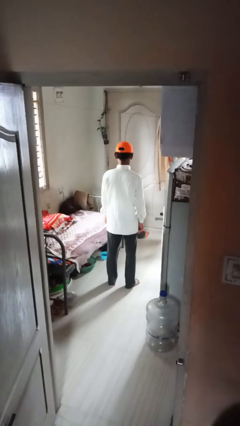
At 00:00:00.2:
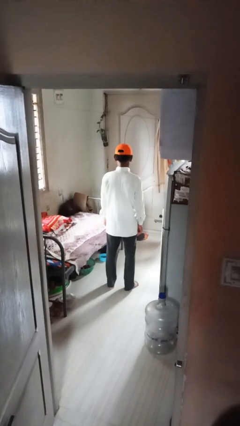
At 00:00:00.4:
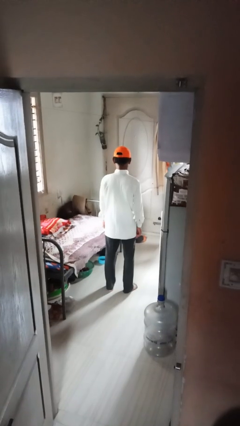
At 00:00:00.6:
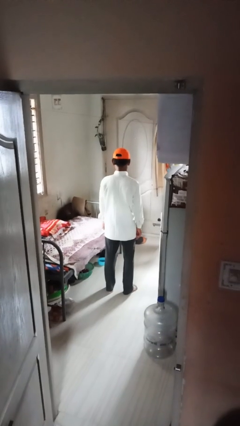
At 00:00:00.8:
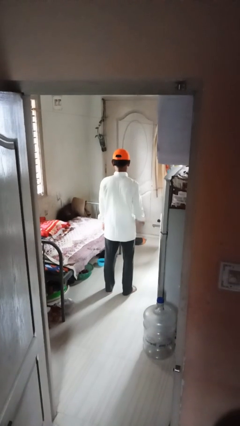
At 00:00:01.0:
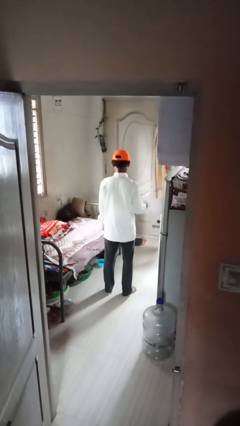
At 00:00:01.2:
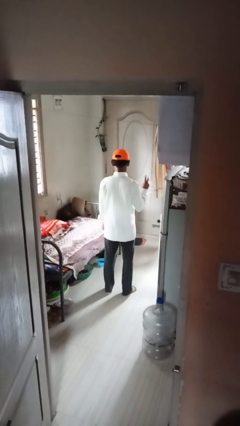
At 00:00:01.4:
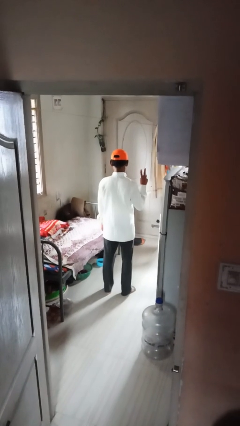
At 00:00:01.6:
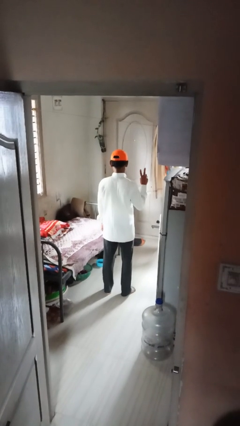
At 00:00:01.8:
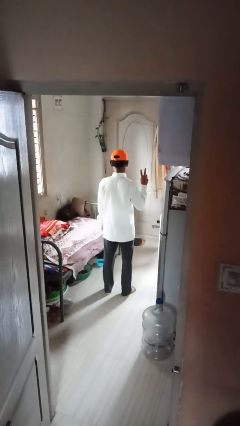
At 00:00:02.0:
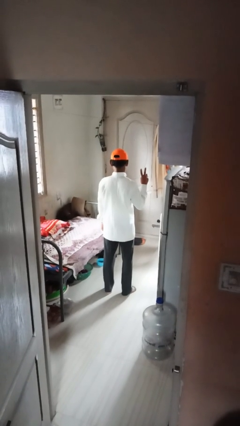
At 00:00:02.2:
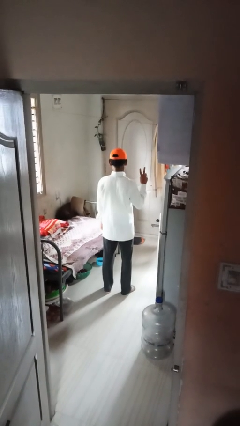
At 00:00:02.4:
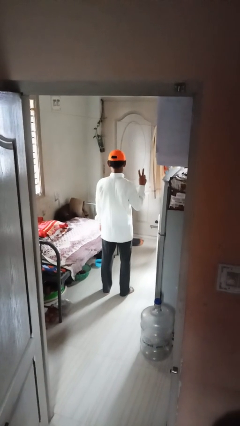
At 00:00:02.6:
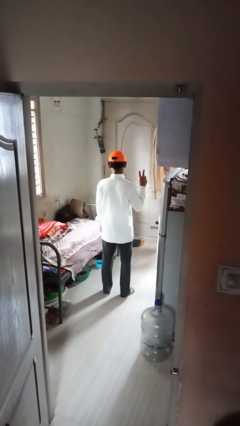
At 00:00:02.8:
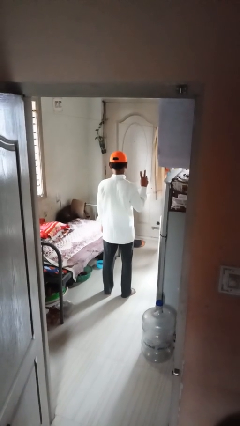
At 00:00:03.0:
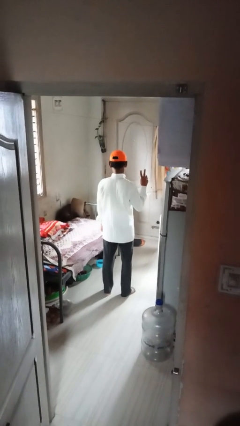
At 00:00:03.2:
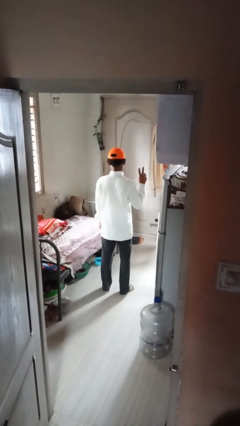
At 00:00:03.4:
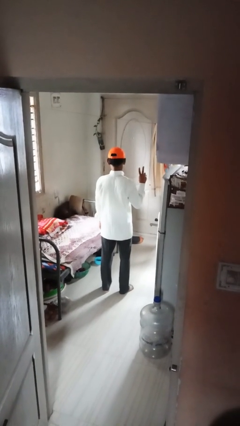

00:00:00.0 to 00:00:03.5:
person gestures peace

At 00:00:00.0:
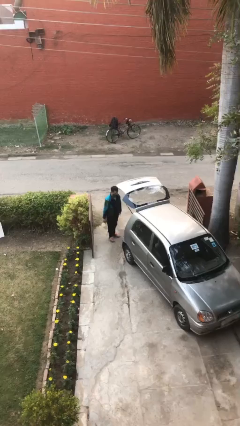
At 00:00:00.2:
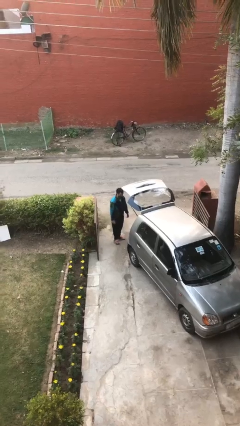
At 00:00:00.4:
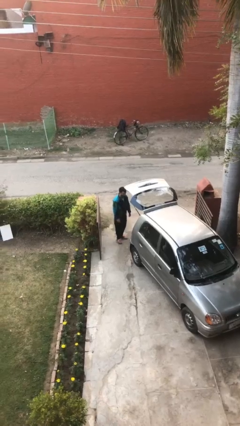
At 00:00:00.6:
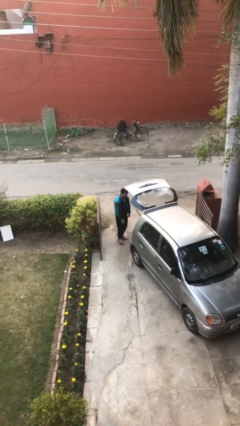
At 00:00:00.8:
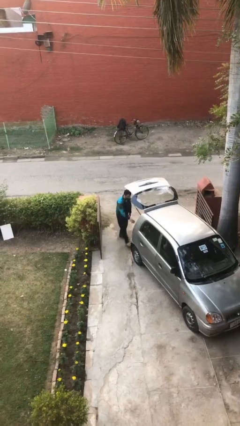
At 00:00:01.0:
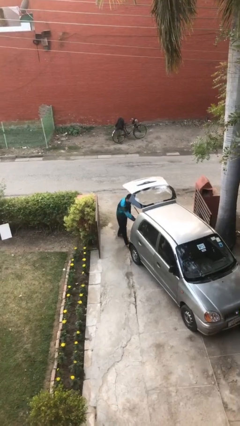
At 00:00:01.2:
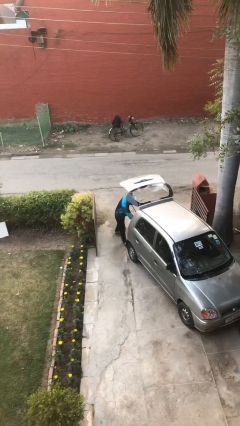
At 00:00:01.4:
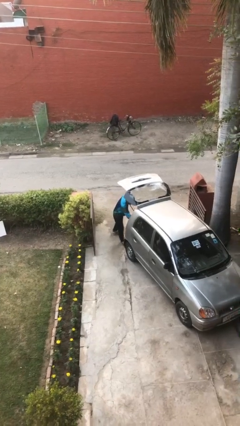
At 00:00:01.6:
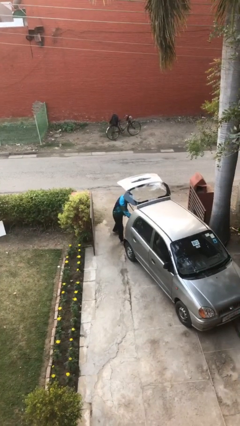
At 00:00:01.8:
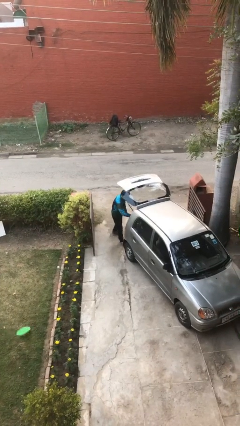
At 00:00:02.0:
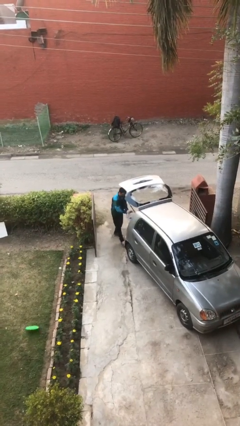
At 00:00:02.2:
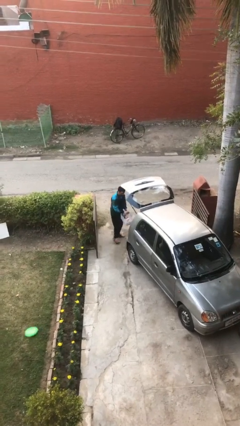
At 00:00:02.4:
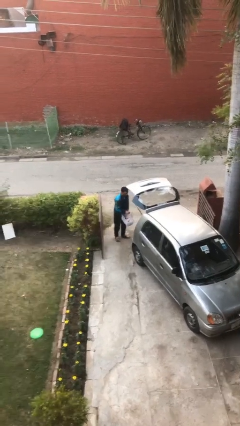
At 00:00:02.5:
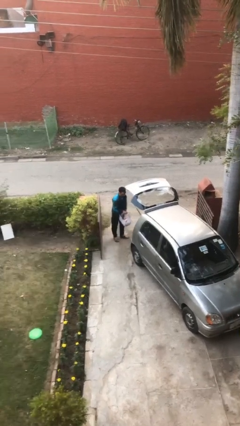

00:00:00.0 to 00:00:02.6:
person unloads car

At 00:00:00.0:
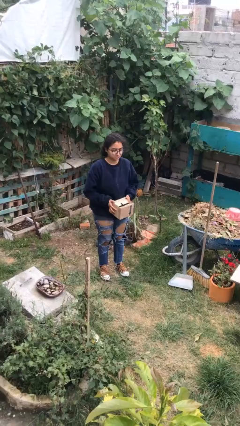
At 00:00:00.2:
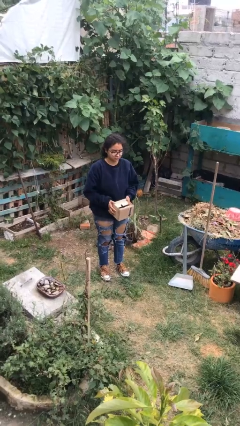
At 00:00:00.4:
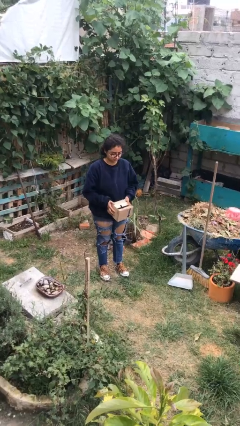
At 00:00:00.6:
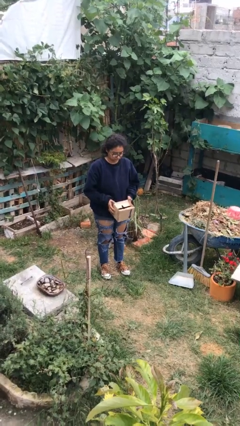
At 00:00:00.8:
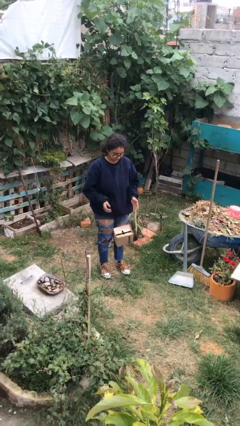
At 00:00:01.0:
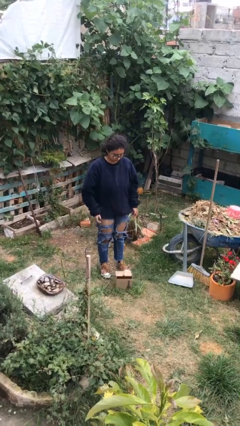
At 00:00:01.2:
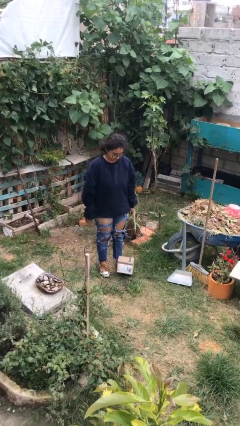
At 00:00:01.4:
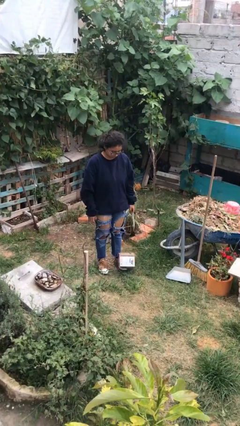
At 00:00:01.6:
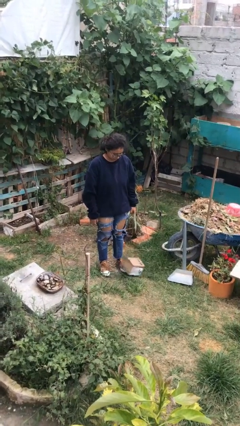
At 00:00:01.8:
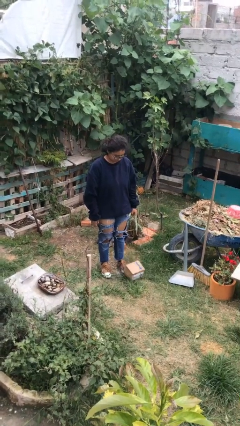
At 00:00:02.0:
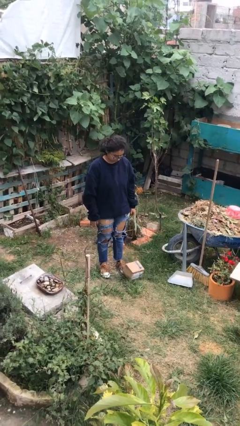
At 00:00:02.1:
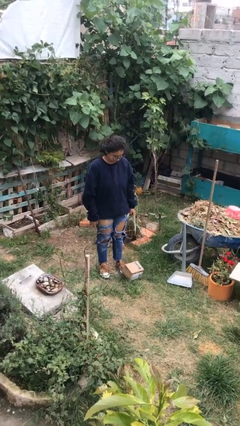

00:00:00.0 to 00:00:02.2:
person drops object

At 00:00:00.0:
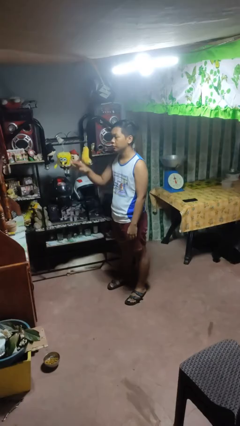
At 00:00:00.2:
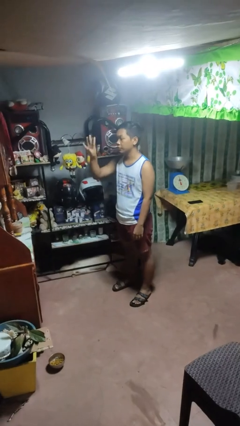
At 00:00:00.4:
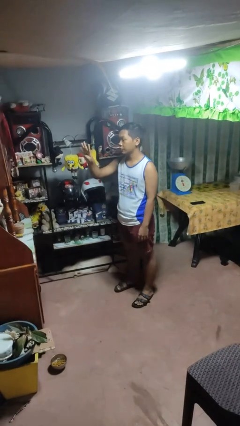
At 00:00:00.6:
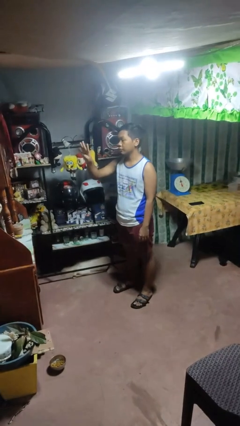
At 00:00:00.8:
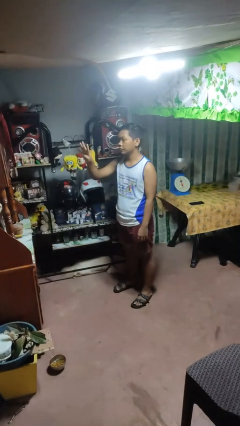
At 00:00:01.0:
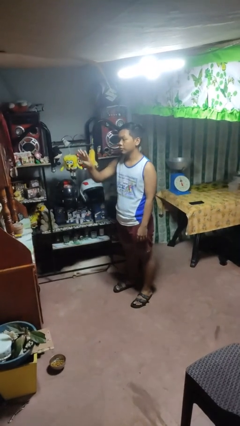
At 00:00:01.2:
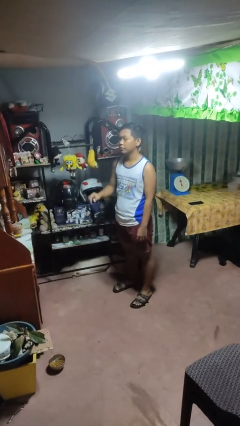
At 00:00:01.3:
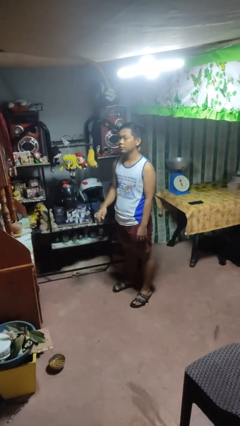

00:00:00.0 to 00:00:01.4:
person gestures number four

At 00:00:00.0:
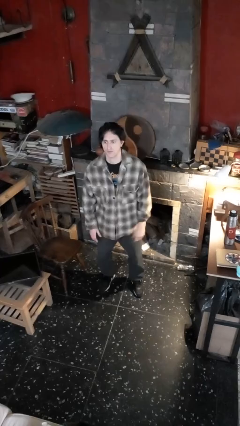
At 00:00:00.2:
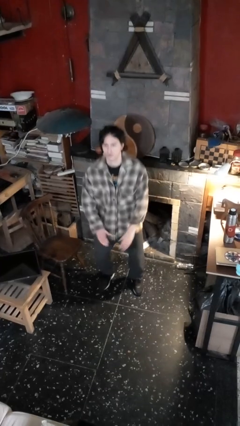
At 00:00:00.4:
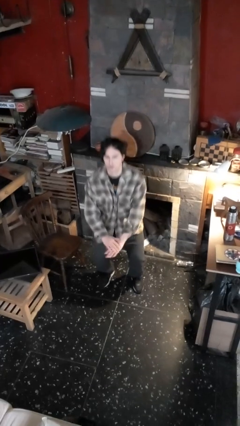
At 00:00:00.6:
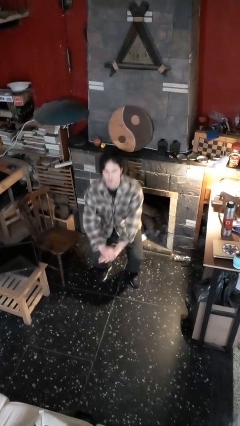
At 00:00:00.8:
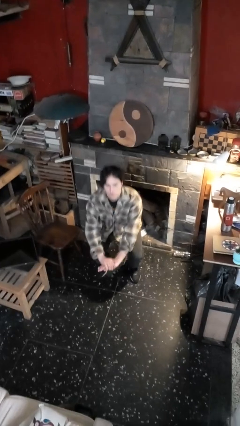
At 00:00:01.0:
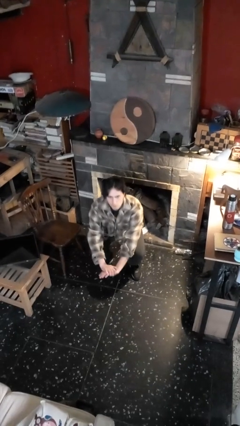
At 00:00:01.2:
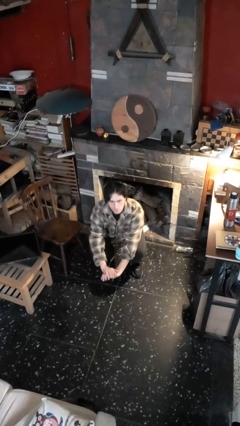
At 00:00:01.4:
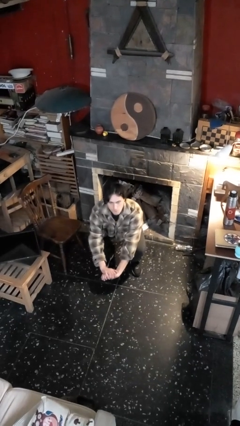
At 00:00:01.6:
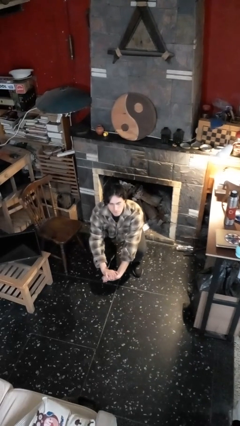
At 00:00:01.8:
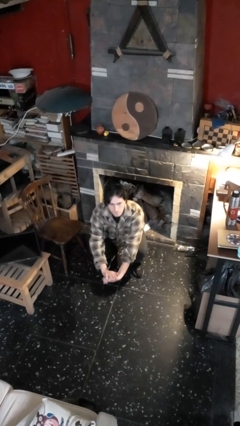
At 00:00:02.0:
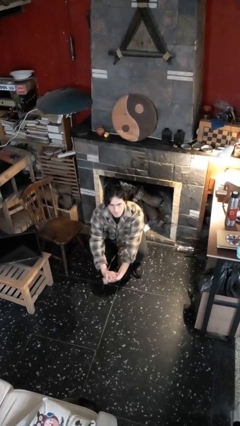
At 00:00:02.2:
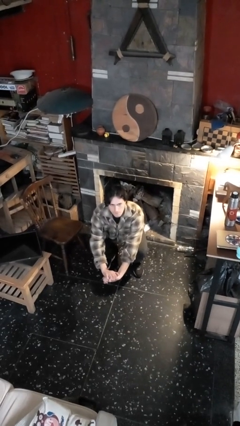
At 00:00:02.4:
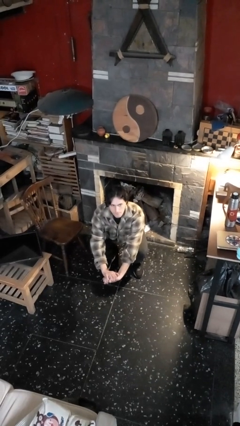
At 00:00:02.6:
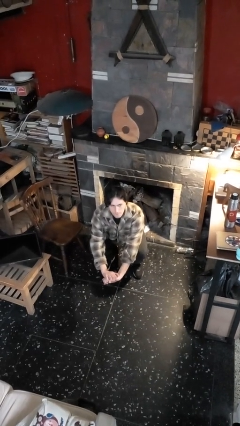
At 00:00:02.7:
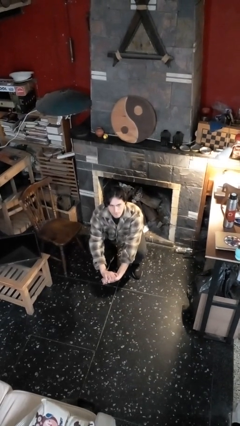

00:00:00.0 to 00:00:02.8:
person squats

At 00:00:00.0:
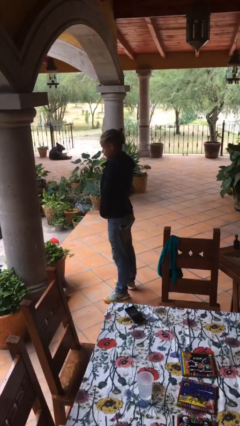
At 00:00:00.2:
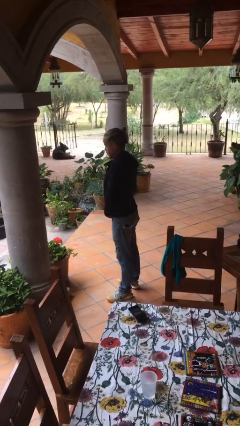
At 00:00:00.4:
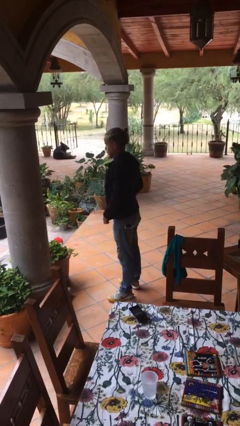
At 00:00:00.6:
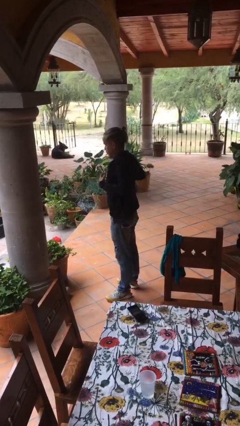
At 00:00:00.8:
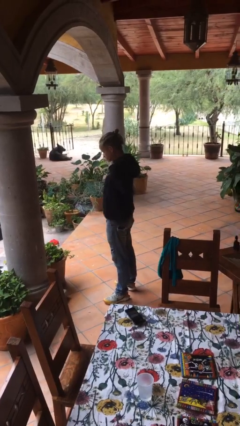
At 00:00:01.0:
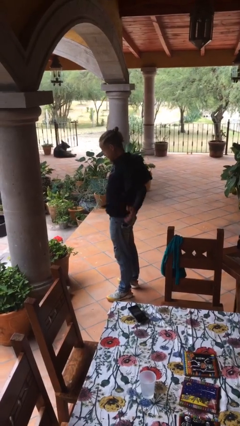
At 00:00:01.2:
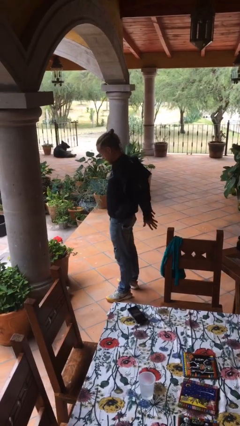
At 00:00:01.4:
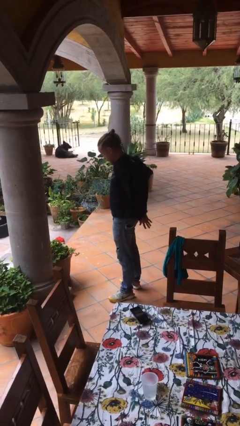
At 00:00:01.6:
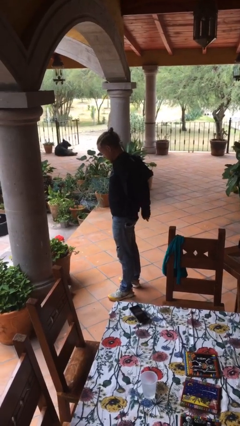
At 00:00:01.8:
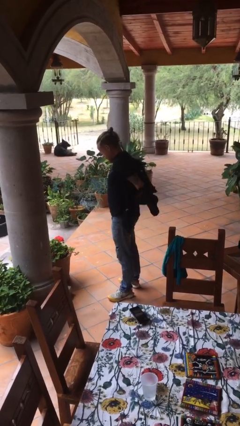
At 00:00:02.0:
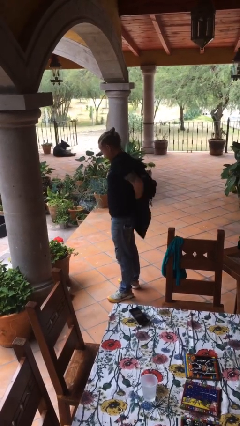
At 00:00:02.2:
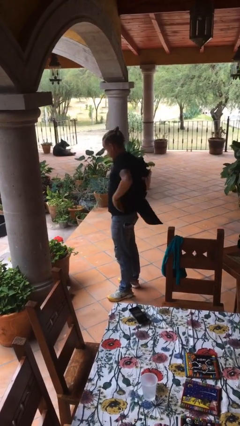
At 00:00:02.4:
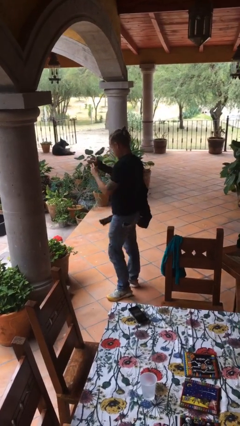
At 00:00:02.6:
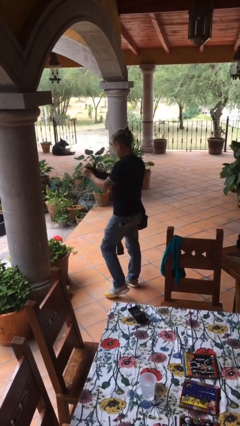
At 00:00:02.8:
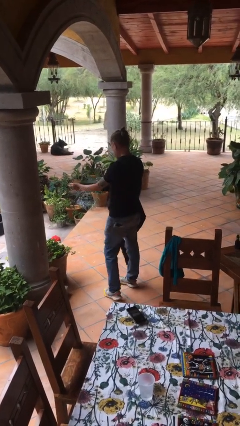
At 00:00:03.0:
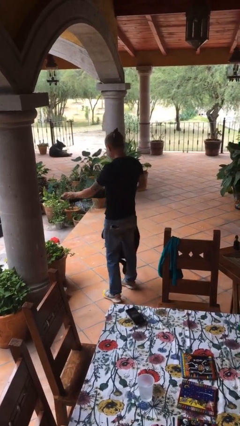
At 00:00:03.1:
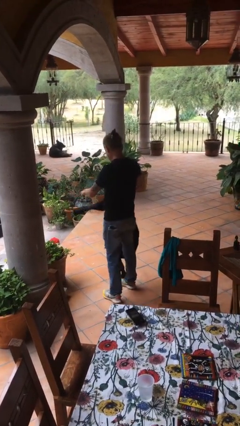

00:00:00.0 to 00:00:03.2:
person takes off jacket

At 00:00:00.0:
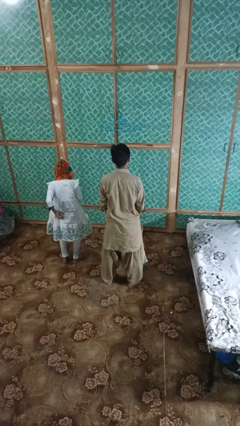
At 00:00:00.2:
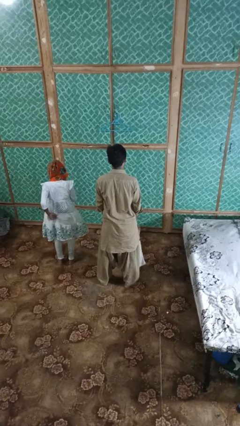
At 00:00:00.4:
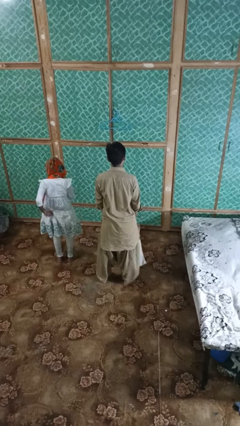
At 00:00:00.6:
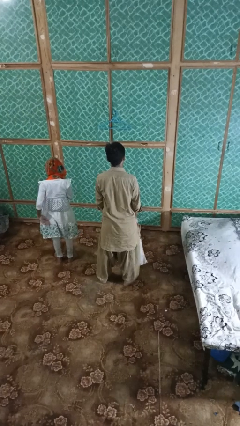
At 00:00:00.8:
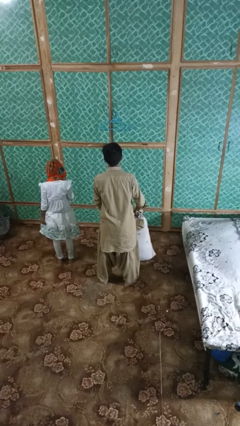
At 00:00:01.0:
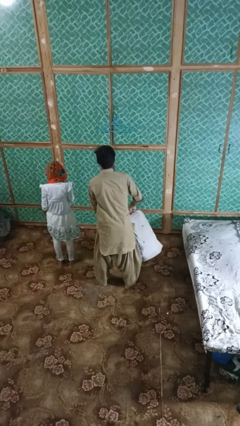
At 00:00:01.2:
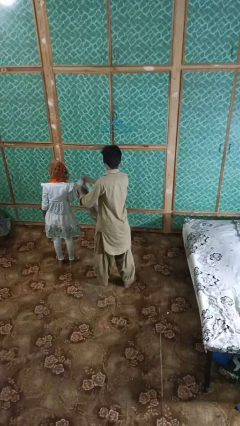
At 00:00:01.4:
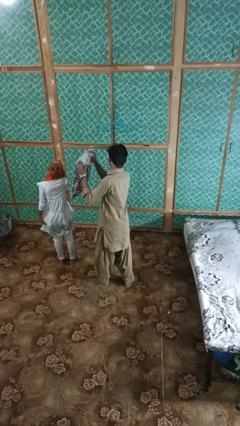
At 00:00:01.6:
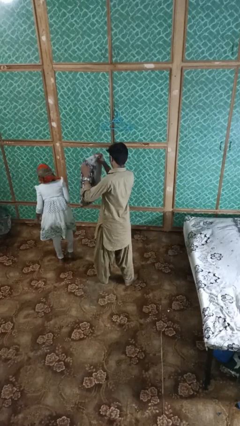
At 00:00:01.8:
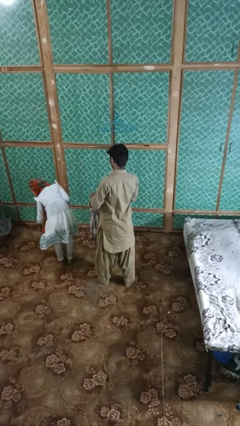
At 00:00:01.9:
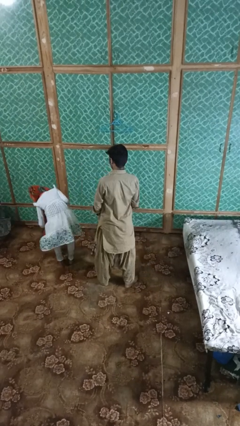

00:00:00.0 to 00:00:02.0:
person hits person with pillow
